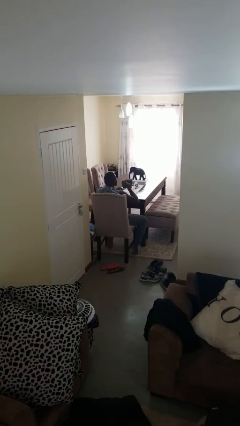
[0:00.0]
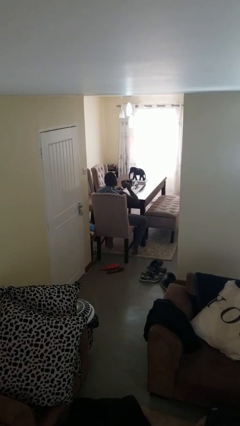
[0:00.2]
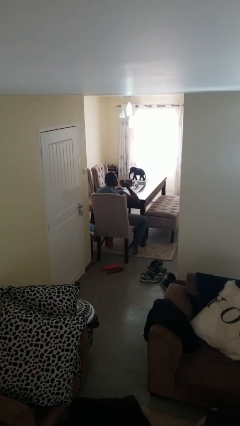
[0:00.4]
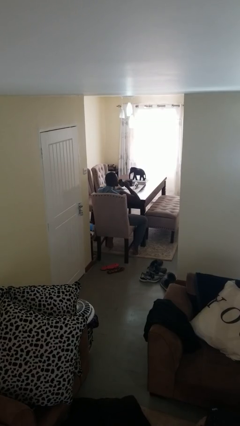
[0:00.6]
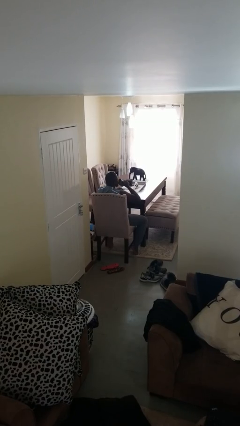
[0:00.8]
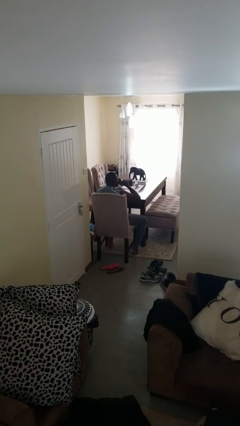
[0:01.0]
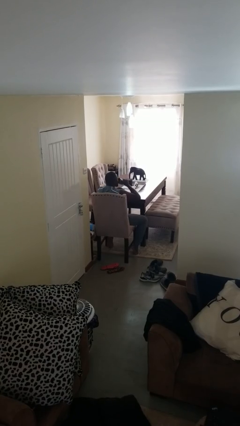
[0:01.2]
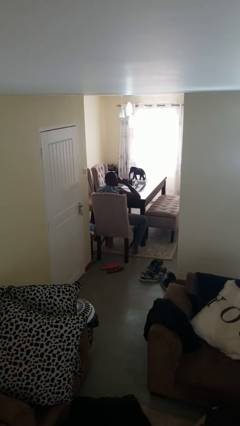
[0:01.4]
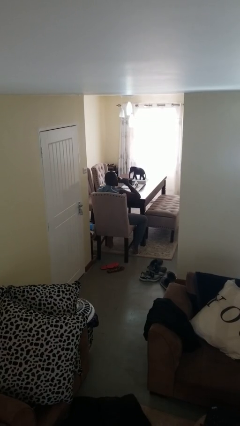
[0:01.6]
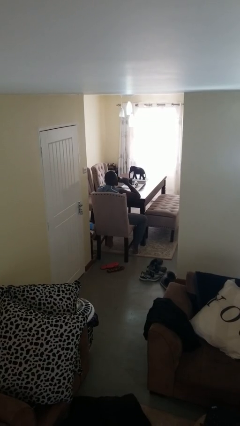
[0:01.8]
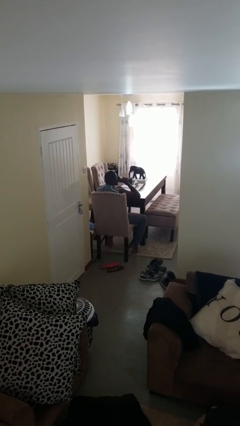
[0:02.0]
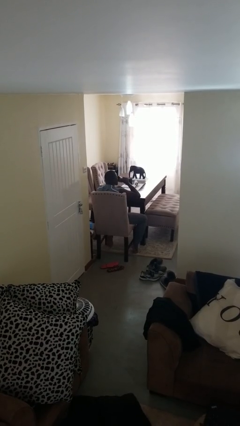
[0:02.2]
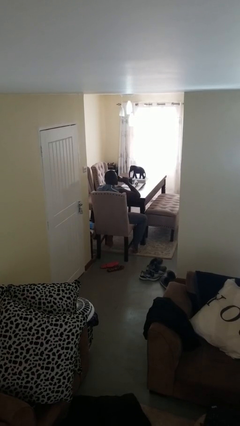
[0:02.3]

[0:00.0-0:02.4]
person drinks from mug

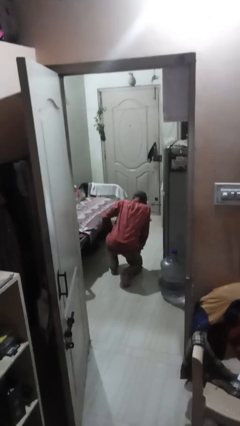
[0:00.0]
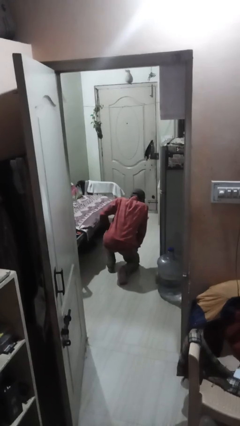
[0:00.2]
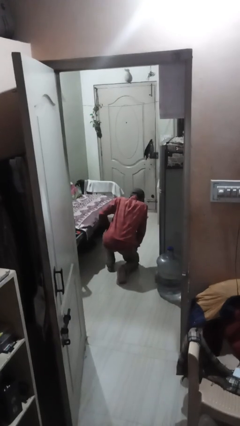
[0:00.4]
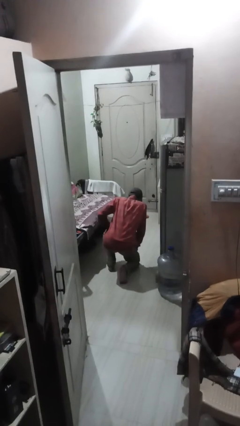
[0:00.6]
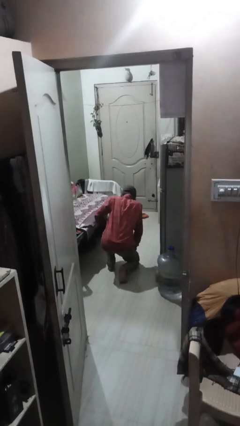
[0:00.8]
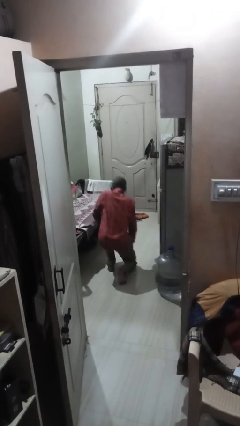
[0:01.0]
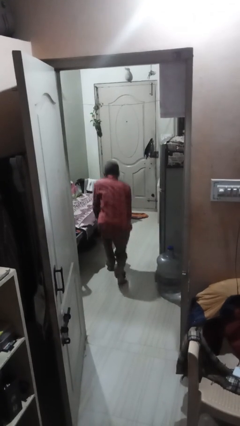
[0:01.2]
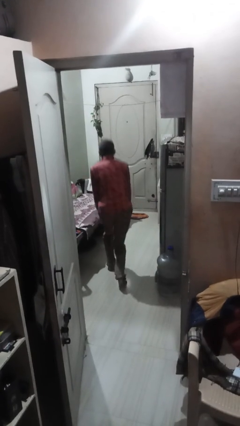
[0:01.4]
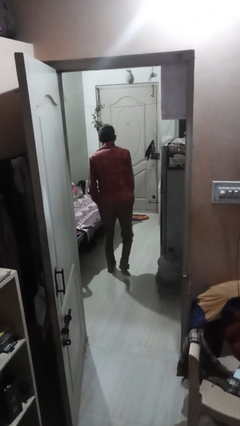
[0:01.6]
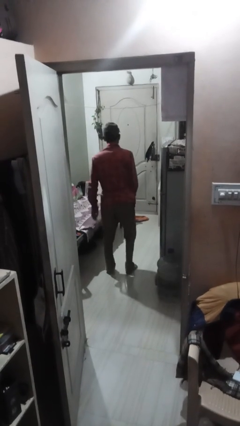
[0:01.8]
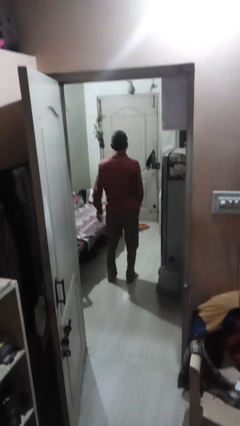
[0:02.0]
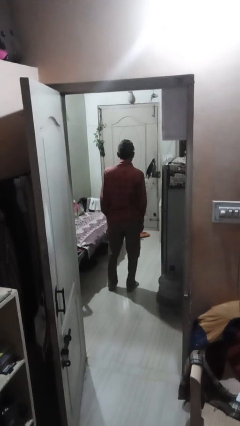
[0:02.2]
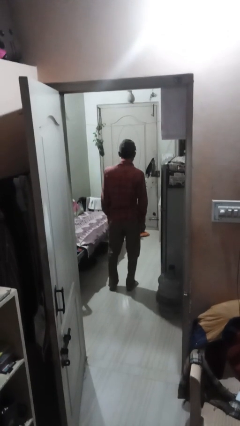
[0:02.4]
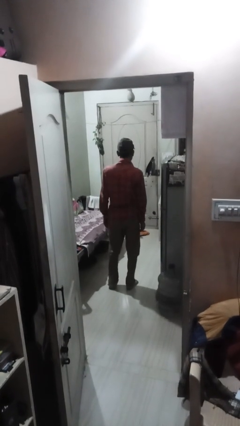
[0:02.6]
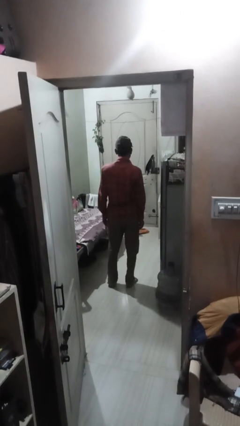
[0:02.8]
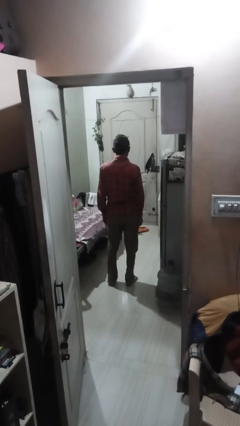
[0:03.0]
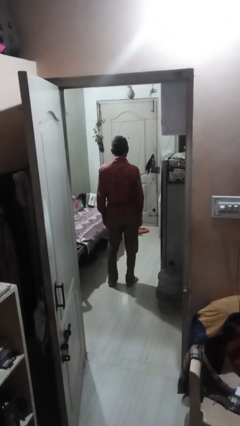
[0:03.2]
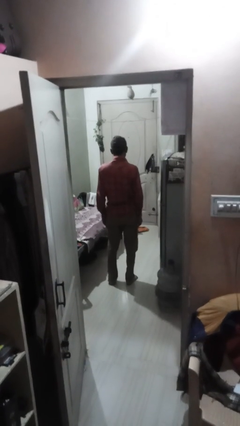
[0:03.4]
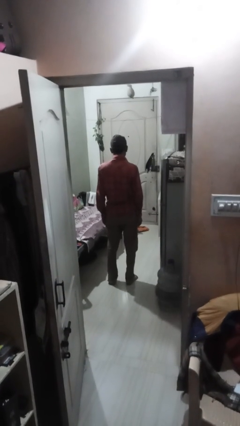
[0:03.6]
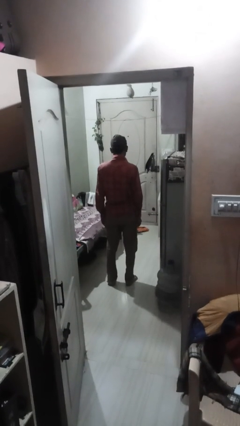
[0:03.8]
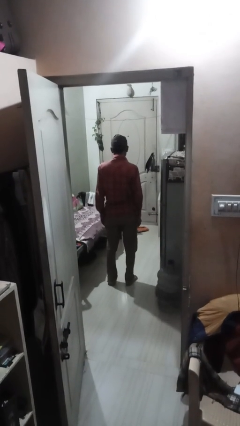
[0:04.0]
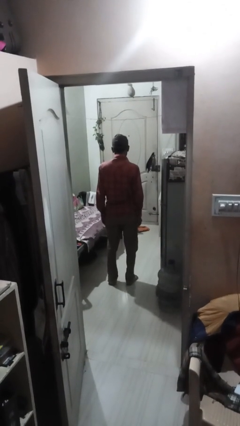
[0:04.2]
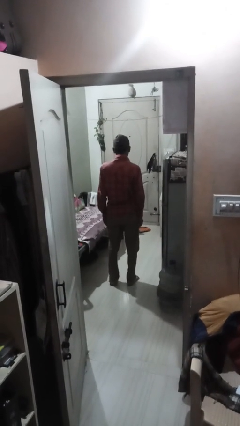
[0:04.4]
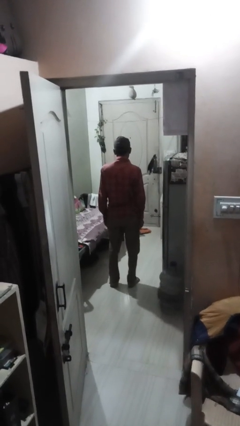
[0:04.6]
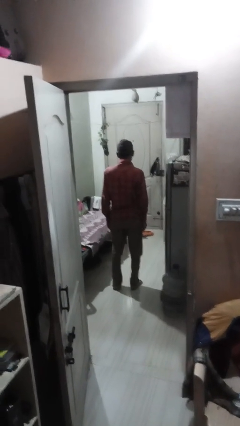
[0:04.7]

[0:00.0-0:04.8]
person stands up from floor

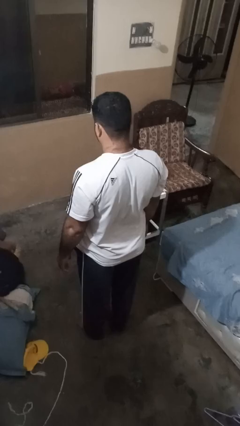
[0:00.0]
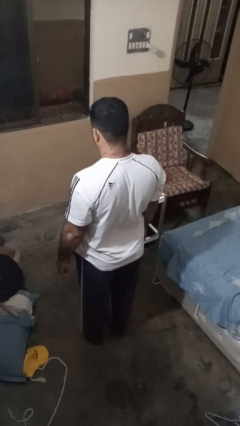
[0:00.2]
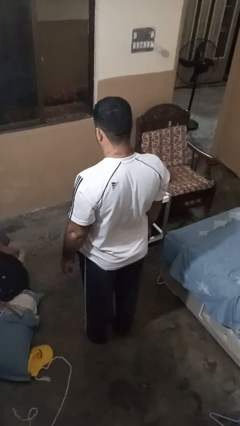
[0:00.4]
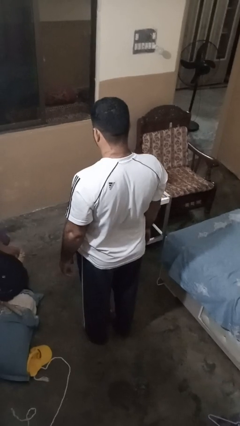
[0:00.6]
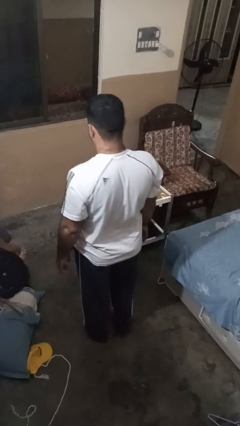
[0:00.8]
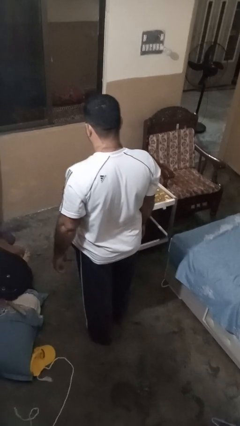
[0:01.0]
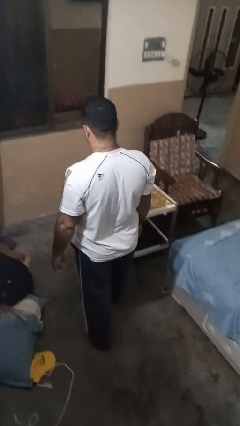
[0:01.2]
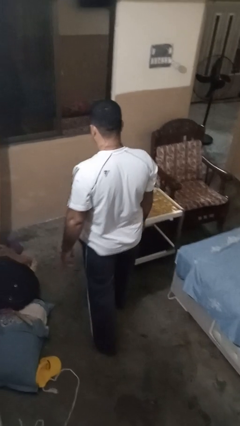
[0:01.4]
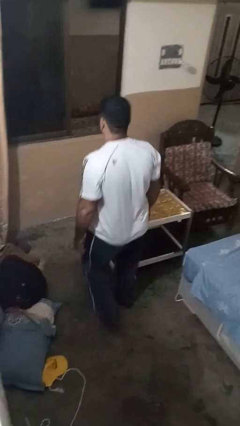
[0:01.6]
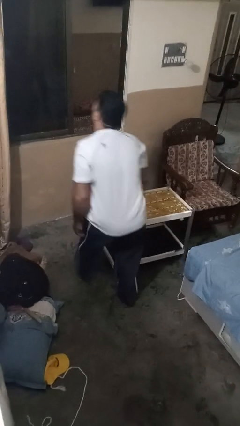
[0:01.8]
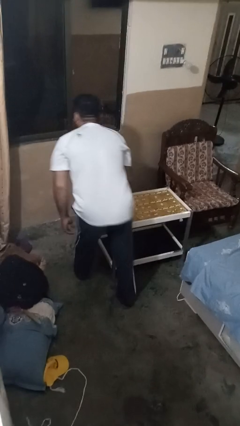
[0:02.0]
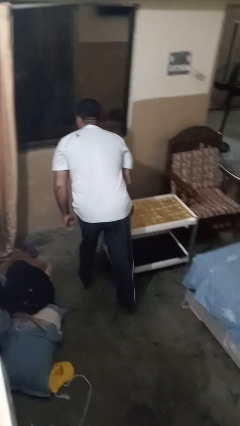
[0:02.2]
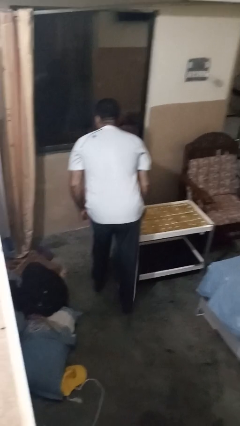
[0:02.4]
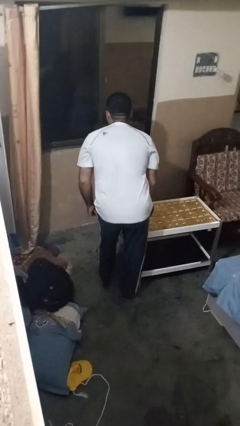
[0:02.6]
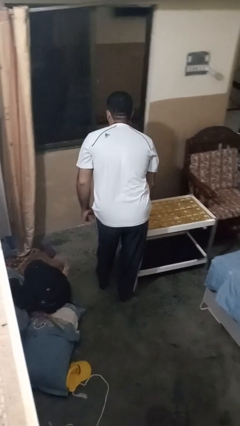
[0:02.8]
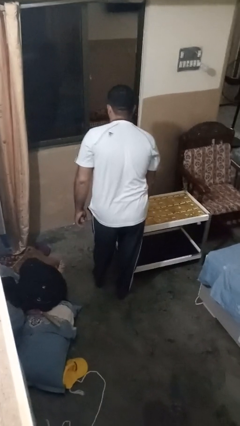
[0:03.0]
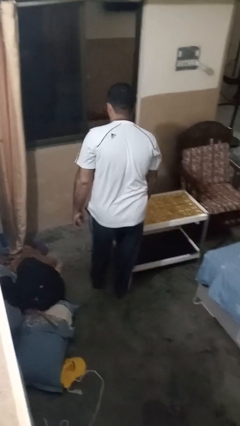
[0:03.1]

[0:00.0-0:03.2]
person bumps into table

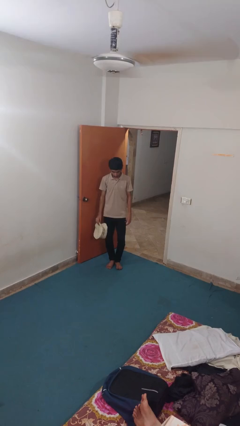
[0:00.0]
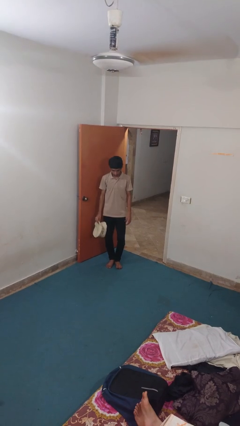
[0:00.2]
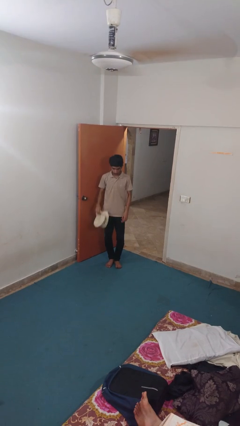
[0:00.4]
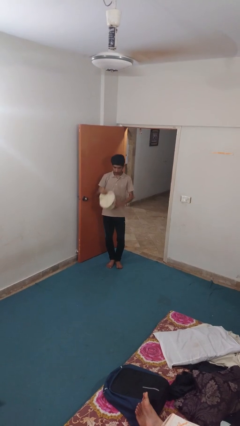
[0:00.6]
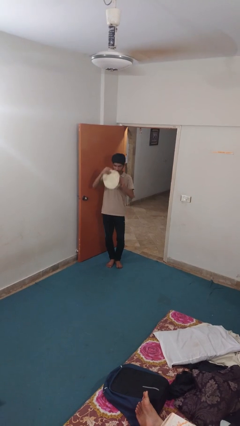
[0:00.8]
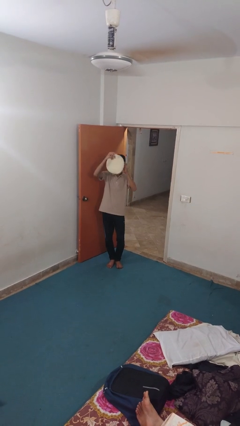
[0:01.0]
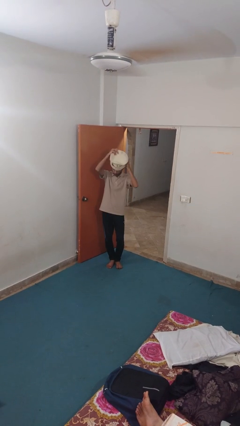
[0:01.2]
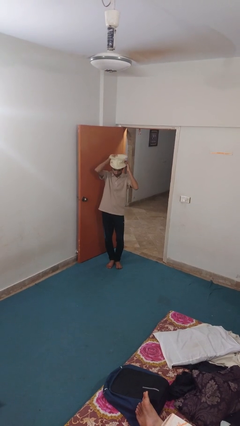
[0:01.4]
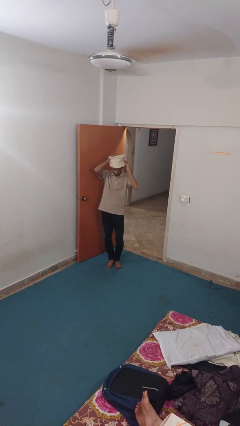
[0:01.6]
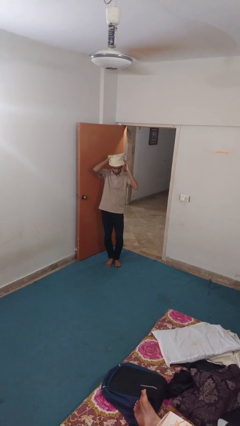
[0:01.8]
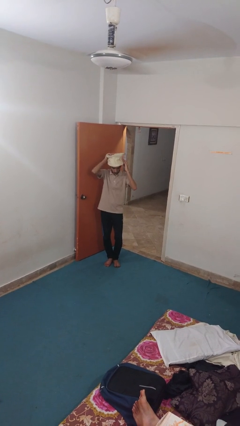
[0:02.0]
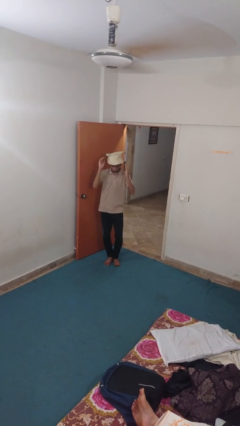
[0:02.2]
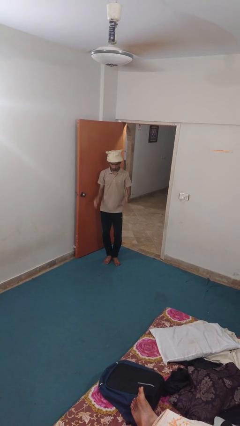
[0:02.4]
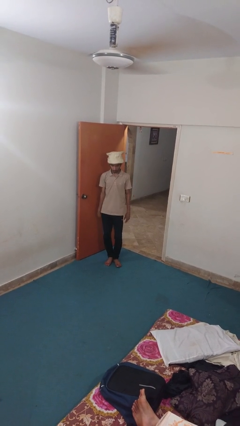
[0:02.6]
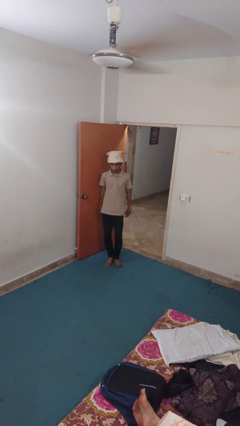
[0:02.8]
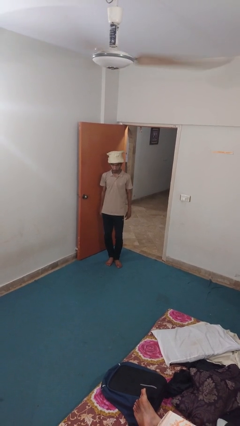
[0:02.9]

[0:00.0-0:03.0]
person puts on hat

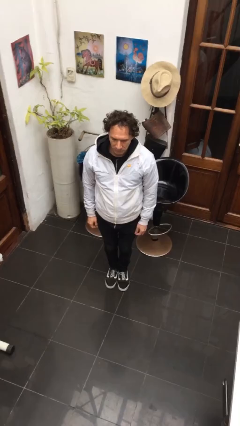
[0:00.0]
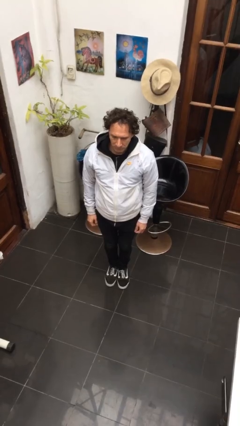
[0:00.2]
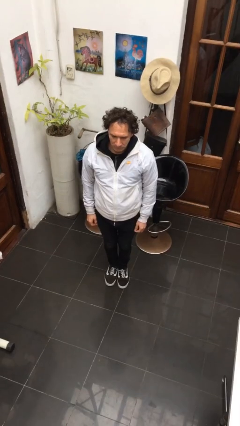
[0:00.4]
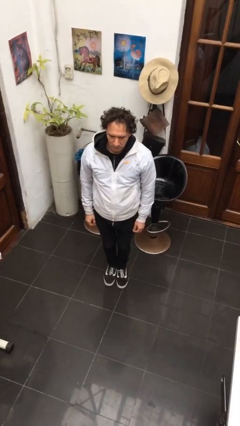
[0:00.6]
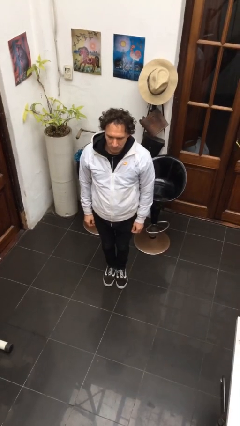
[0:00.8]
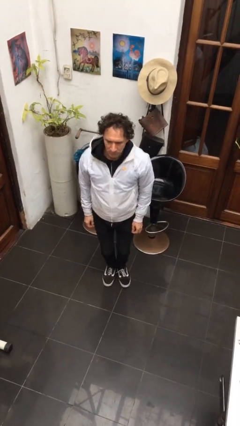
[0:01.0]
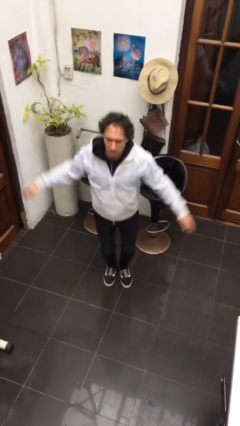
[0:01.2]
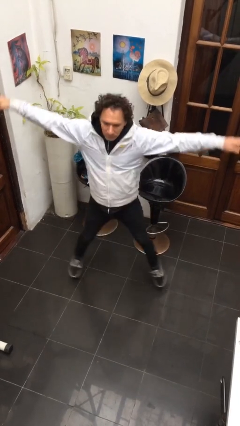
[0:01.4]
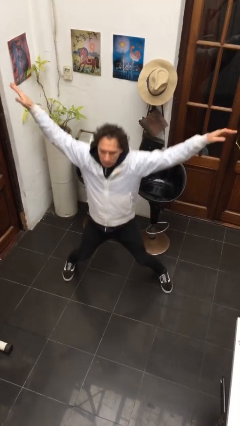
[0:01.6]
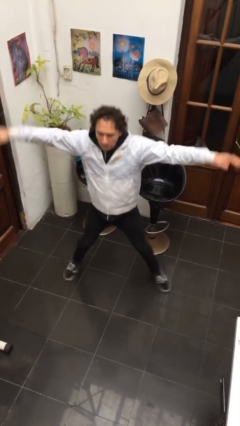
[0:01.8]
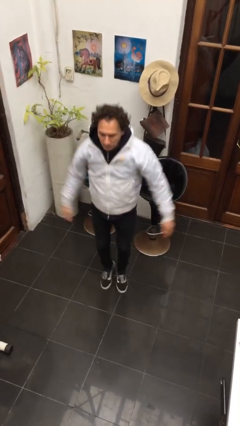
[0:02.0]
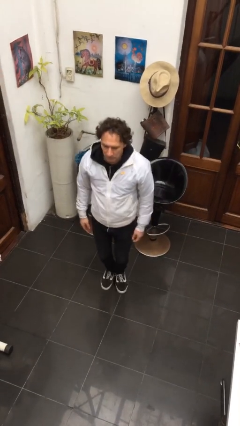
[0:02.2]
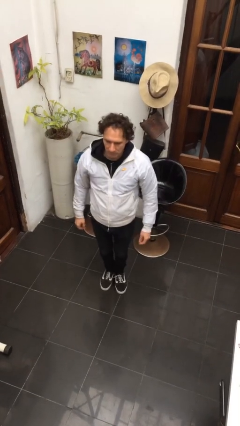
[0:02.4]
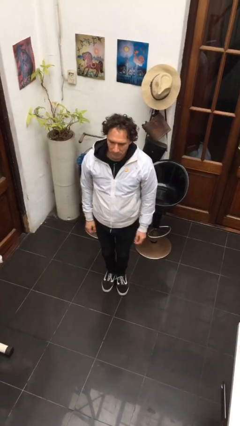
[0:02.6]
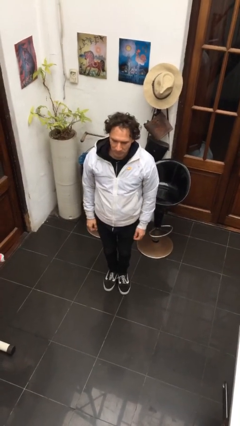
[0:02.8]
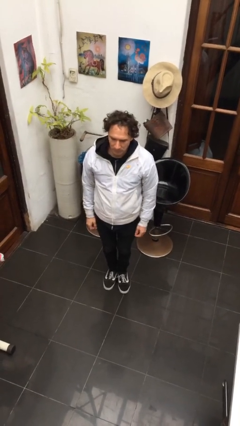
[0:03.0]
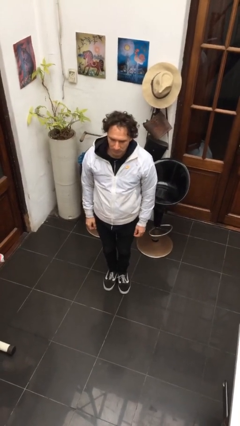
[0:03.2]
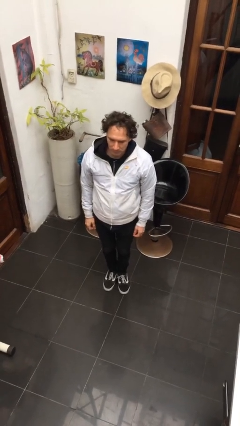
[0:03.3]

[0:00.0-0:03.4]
person exercises with jumping jacks

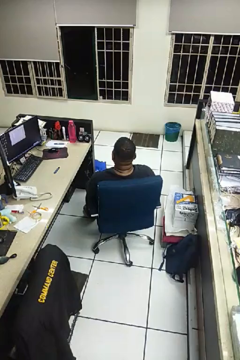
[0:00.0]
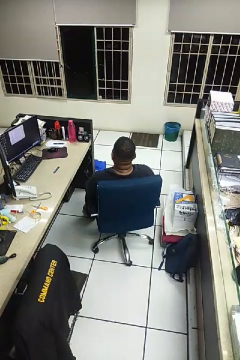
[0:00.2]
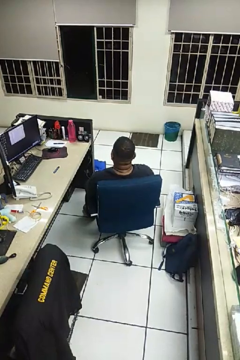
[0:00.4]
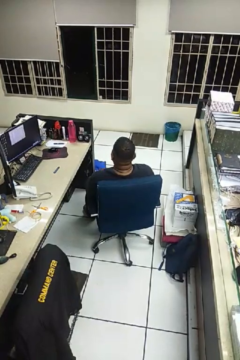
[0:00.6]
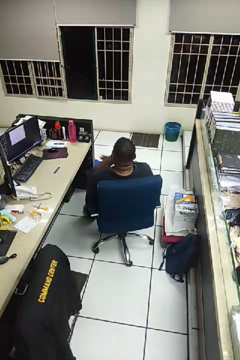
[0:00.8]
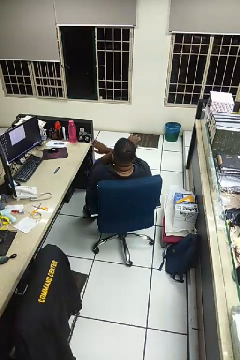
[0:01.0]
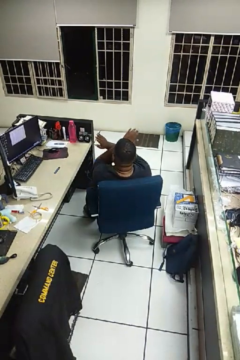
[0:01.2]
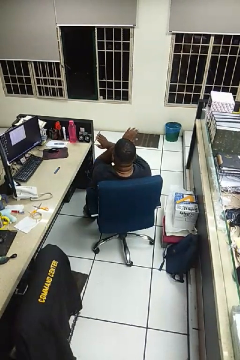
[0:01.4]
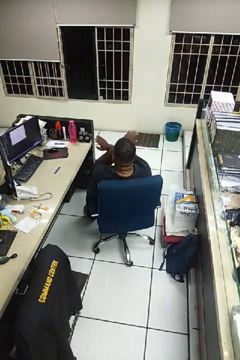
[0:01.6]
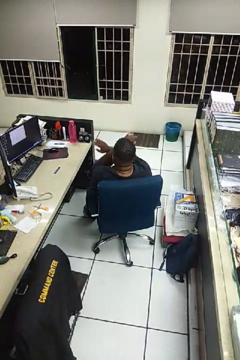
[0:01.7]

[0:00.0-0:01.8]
person gestures arms x
